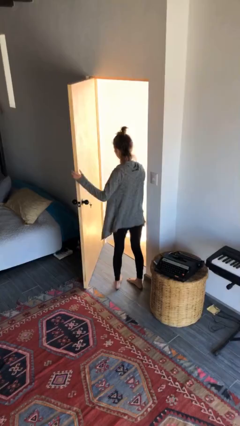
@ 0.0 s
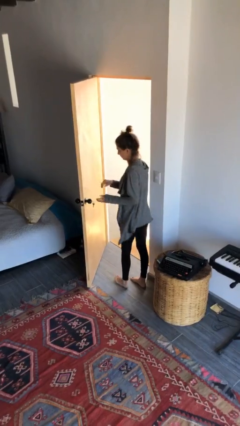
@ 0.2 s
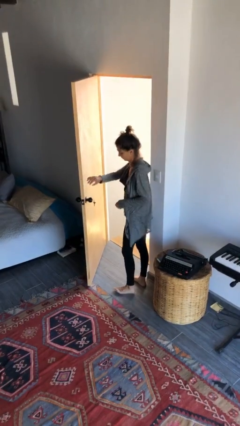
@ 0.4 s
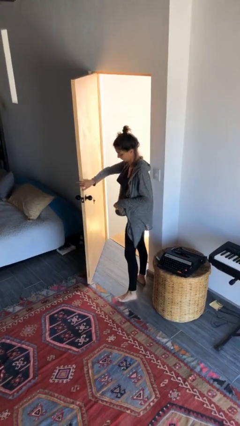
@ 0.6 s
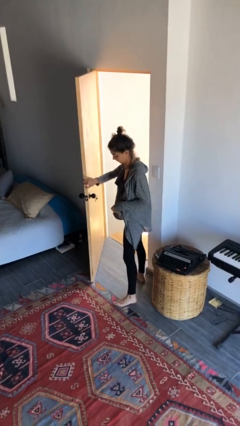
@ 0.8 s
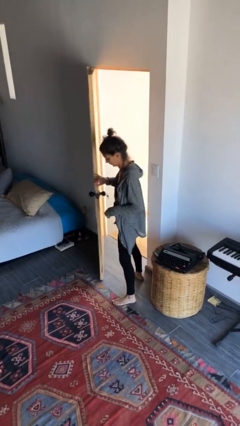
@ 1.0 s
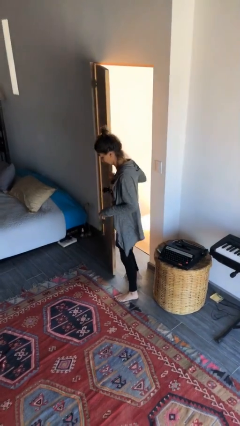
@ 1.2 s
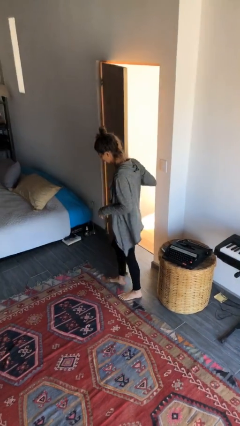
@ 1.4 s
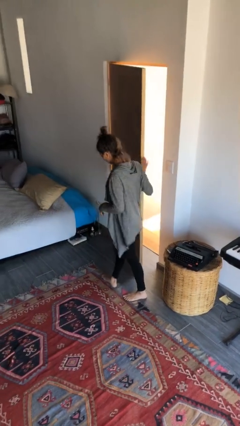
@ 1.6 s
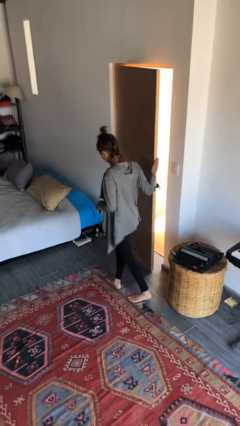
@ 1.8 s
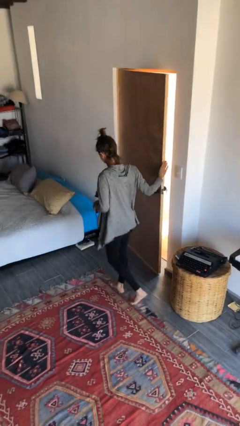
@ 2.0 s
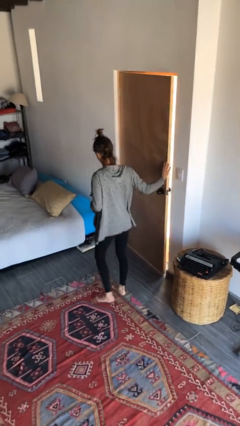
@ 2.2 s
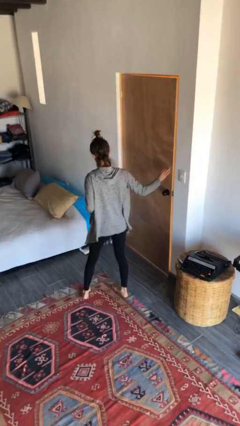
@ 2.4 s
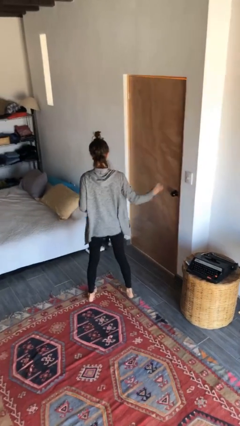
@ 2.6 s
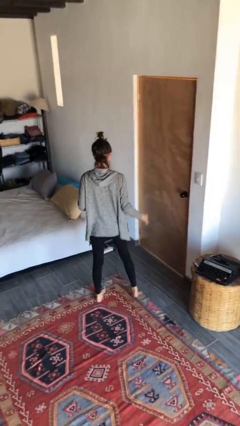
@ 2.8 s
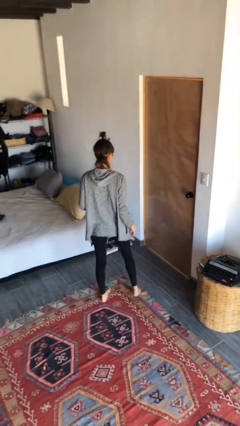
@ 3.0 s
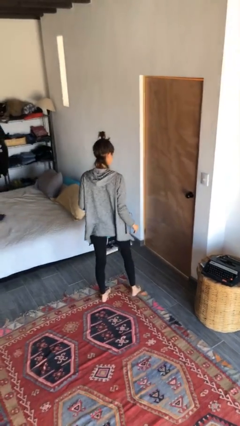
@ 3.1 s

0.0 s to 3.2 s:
person closes facility door

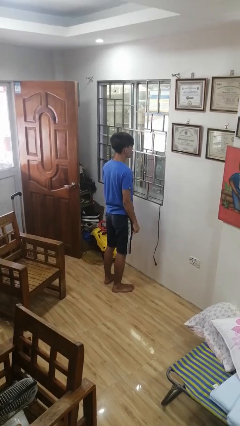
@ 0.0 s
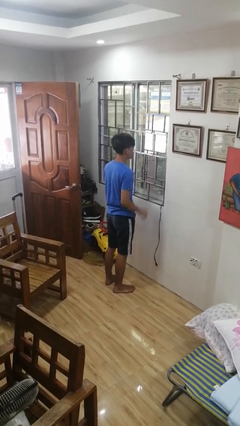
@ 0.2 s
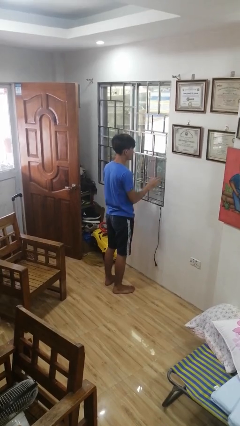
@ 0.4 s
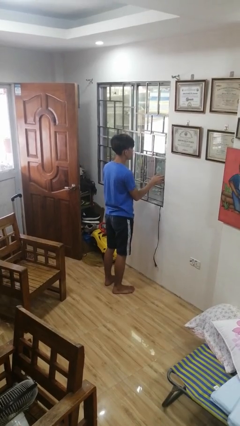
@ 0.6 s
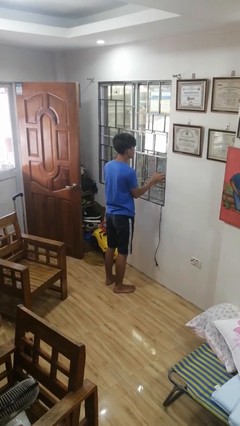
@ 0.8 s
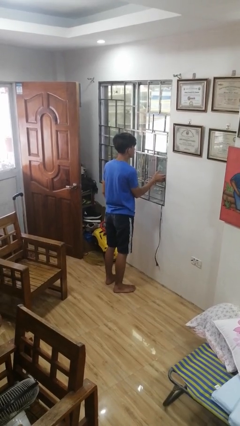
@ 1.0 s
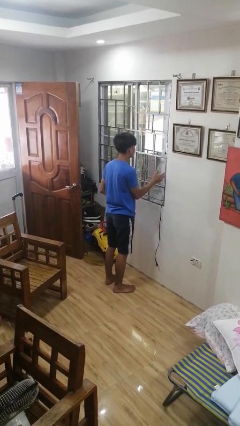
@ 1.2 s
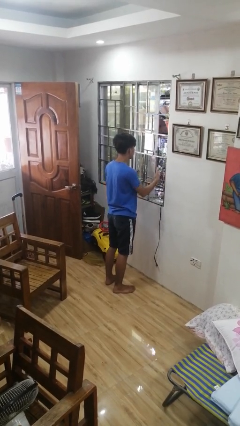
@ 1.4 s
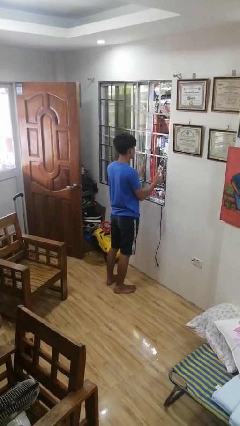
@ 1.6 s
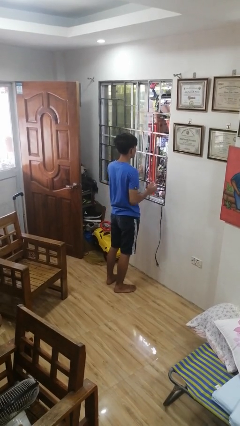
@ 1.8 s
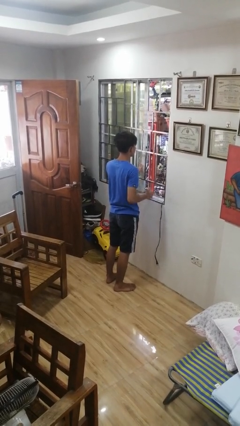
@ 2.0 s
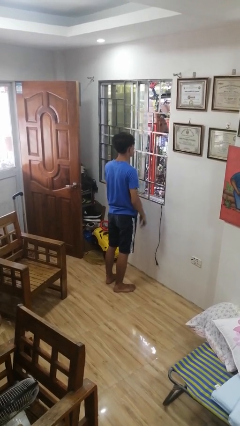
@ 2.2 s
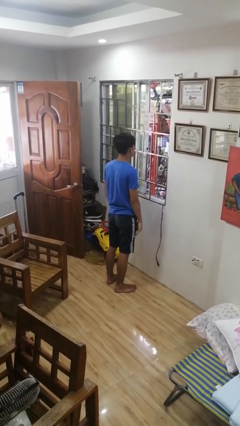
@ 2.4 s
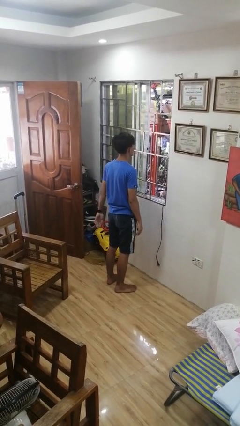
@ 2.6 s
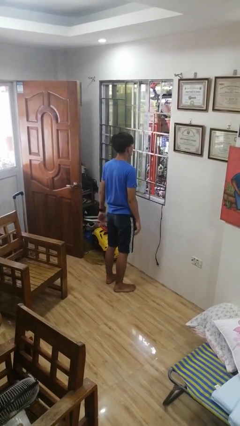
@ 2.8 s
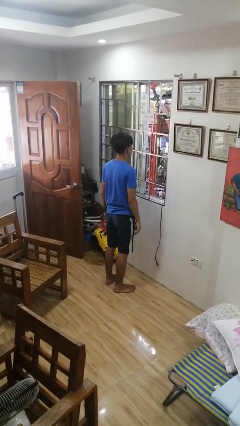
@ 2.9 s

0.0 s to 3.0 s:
person opens home window

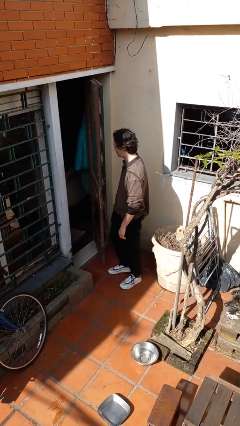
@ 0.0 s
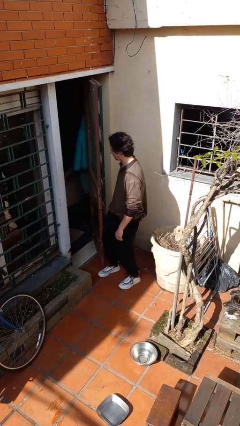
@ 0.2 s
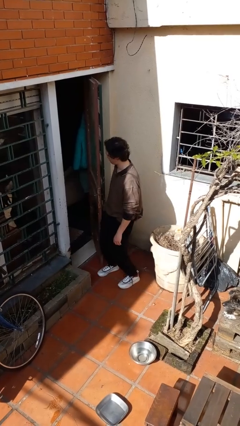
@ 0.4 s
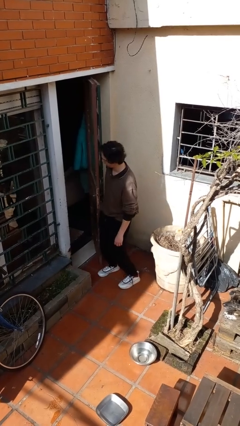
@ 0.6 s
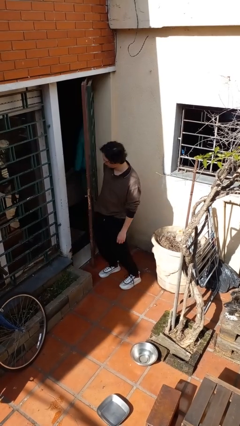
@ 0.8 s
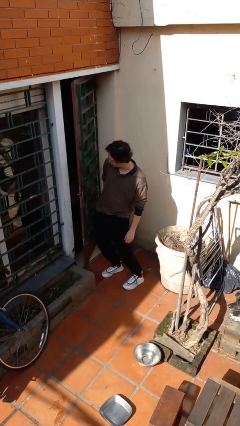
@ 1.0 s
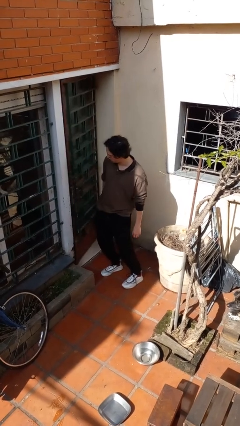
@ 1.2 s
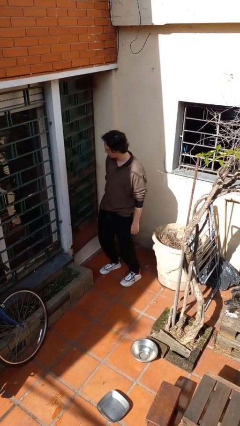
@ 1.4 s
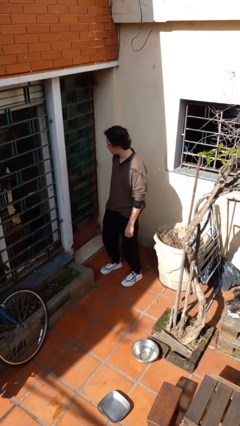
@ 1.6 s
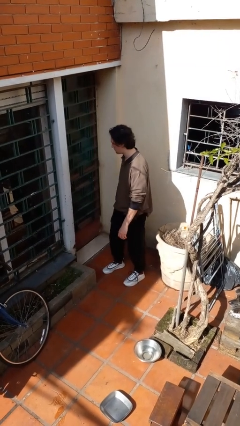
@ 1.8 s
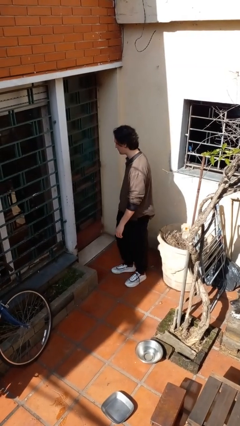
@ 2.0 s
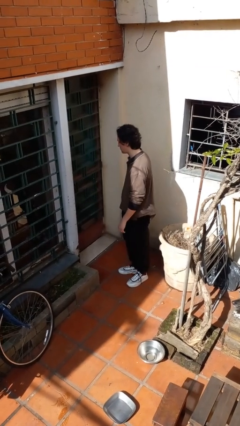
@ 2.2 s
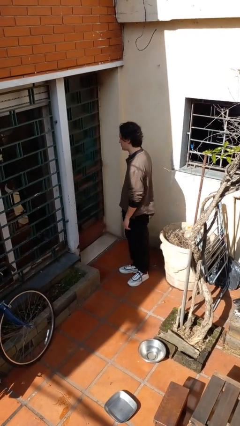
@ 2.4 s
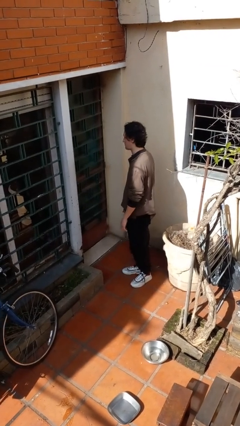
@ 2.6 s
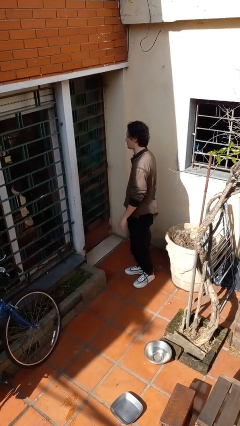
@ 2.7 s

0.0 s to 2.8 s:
person closes door with hip

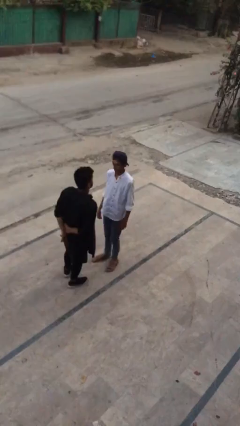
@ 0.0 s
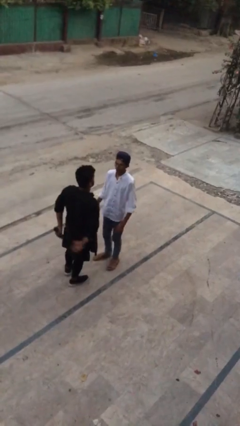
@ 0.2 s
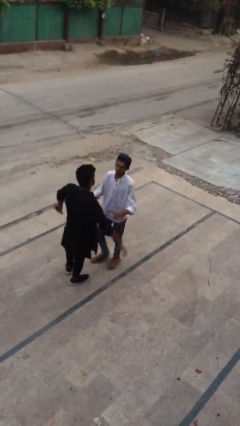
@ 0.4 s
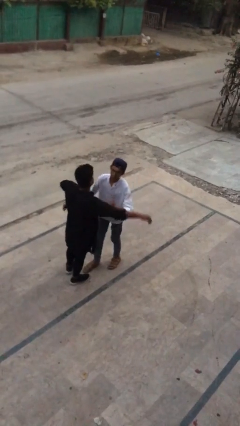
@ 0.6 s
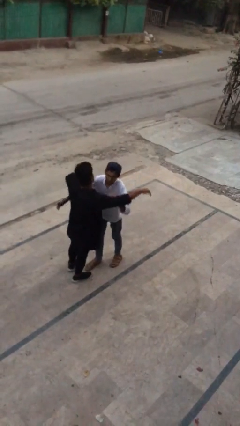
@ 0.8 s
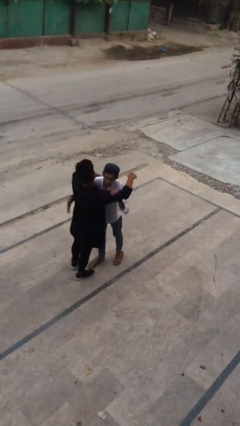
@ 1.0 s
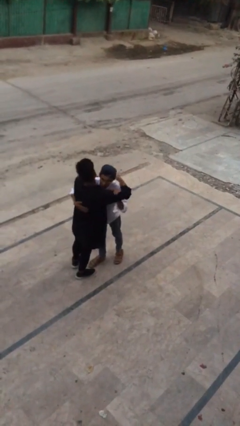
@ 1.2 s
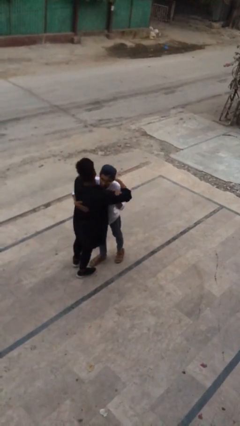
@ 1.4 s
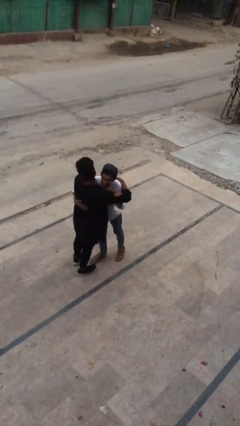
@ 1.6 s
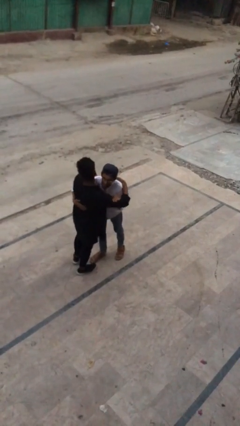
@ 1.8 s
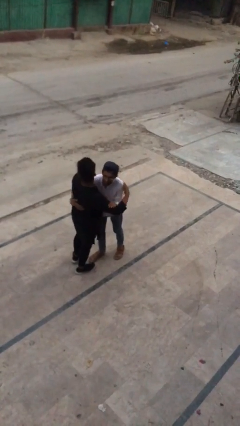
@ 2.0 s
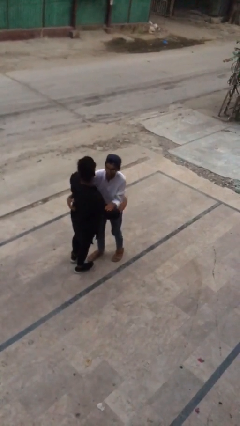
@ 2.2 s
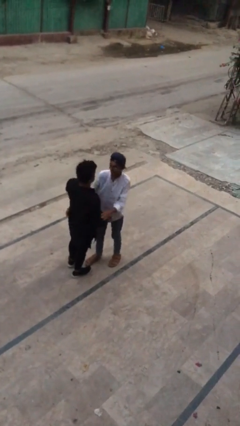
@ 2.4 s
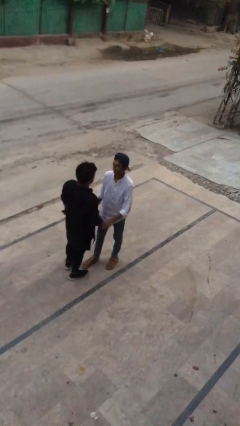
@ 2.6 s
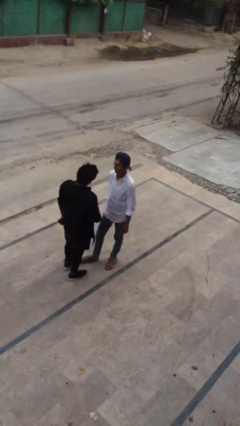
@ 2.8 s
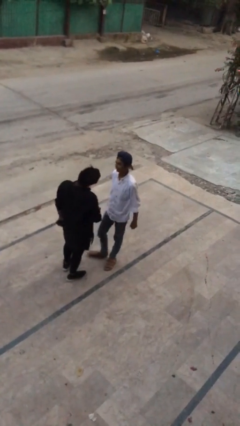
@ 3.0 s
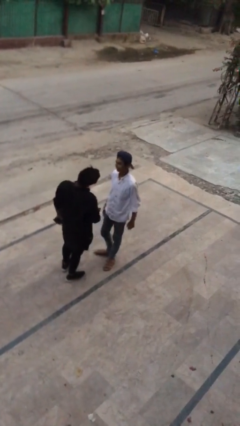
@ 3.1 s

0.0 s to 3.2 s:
person embraces person

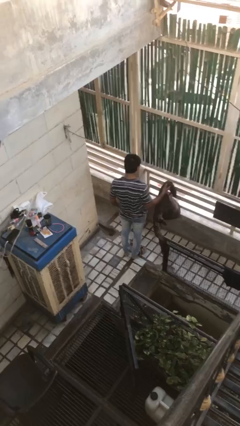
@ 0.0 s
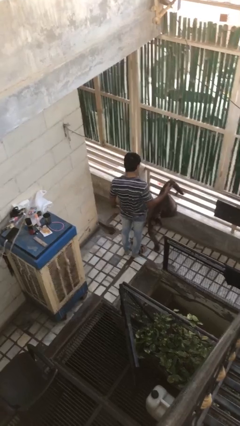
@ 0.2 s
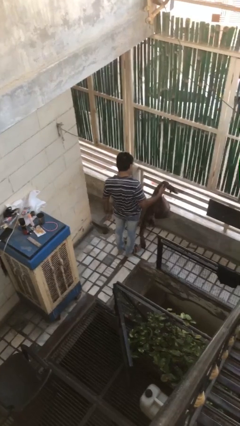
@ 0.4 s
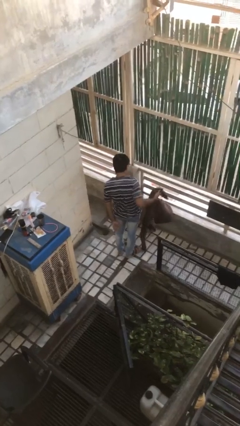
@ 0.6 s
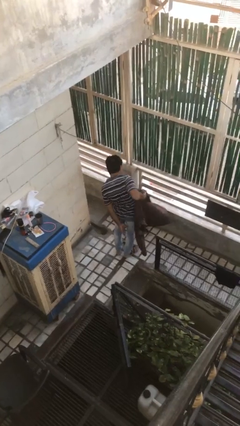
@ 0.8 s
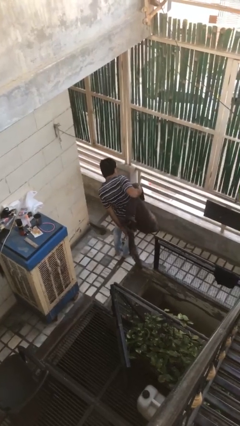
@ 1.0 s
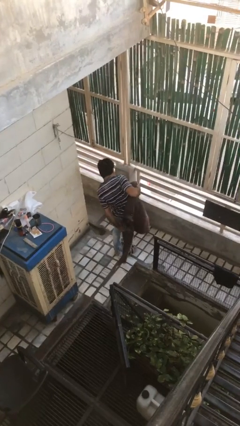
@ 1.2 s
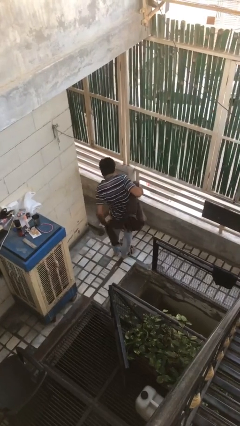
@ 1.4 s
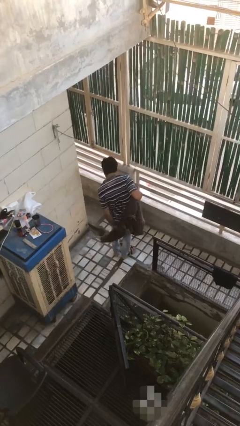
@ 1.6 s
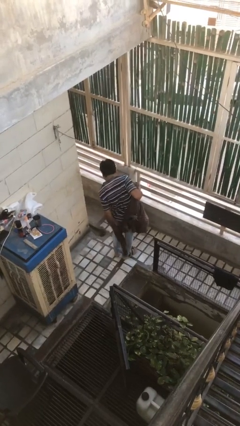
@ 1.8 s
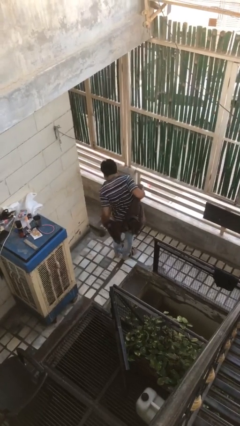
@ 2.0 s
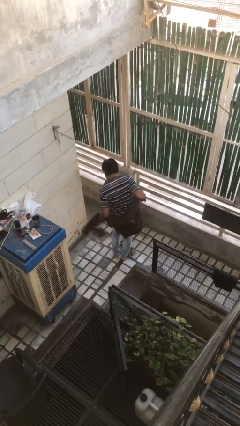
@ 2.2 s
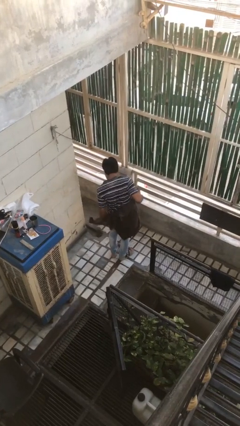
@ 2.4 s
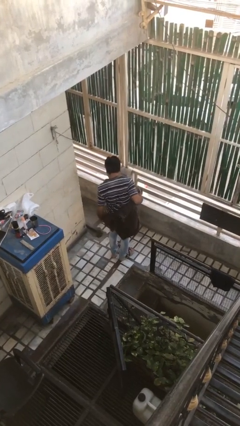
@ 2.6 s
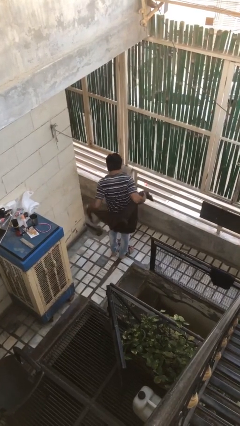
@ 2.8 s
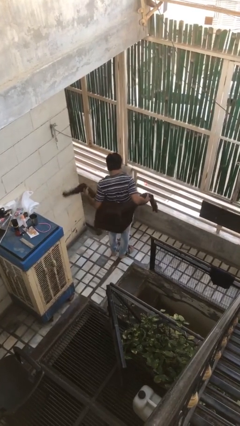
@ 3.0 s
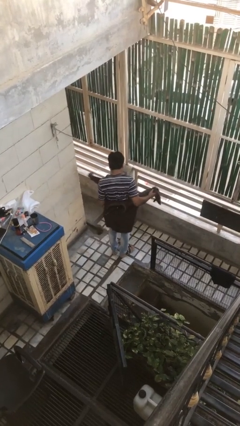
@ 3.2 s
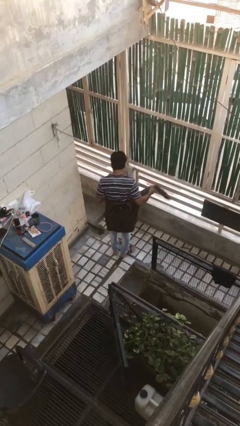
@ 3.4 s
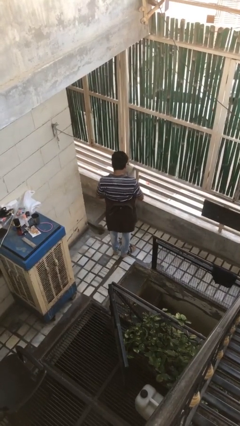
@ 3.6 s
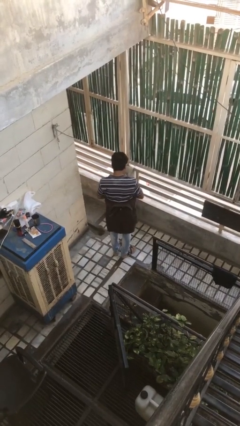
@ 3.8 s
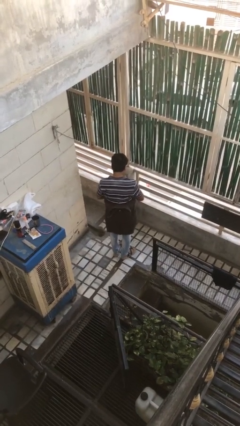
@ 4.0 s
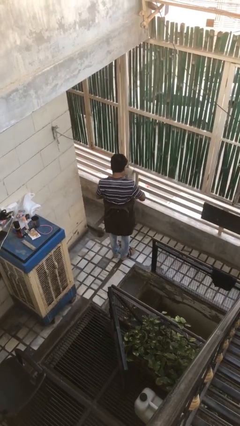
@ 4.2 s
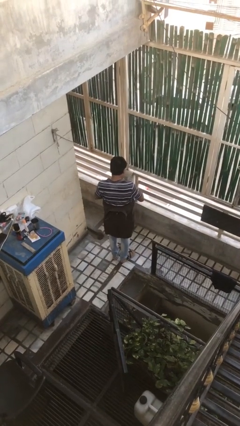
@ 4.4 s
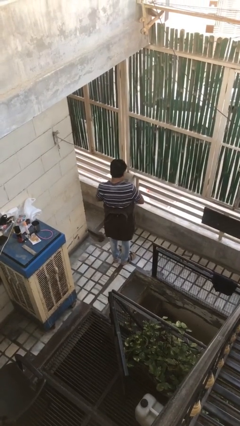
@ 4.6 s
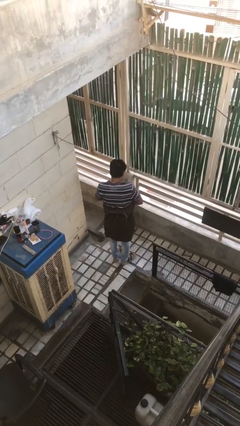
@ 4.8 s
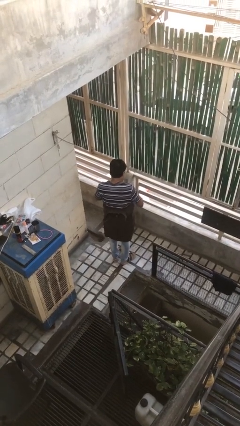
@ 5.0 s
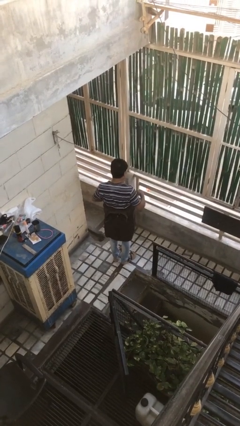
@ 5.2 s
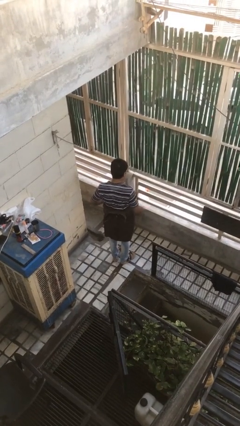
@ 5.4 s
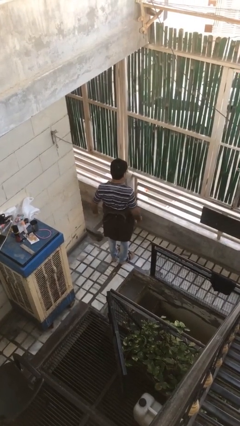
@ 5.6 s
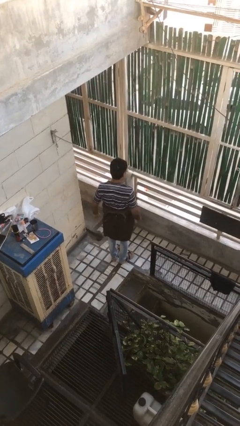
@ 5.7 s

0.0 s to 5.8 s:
person ties jacket around waist
